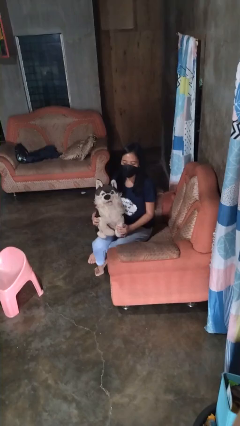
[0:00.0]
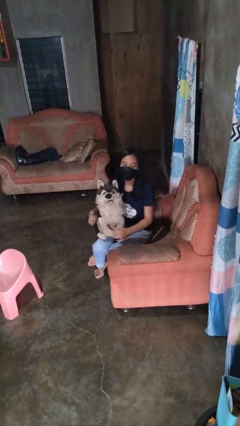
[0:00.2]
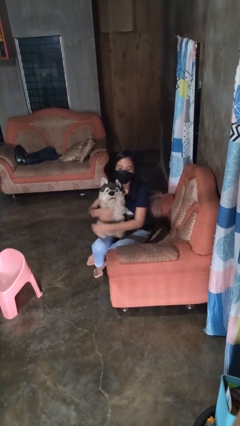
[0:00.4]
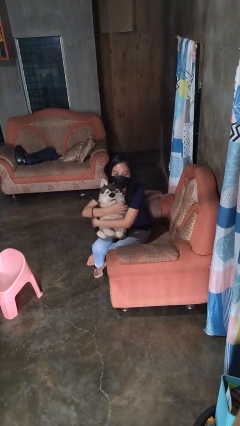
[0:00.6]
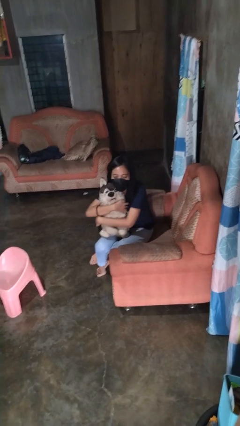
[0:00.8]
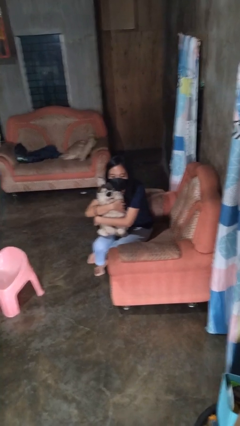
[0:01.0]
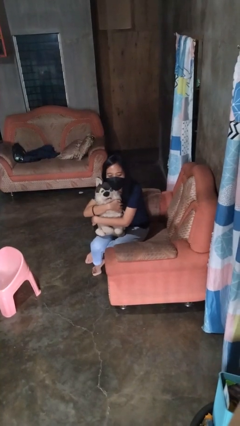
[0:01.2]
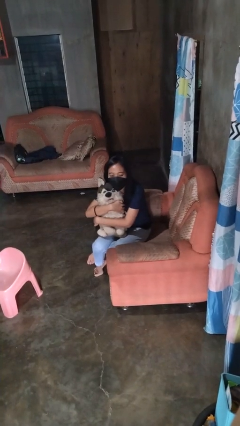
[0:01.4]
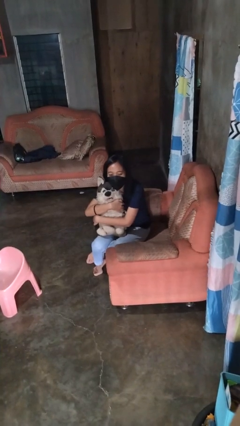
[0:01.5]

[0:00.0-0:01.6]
person hugs stuffed animal

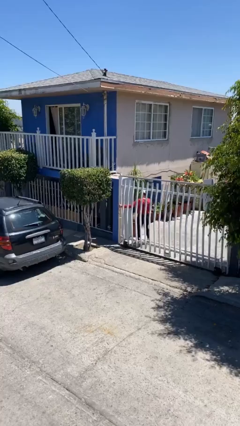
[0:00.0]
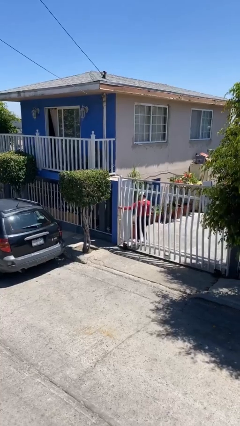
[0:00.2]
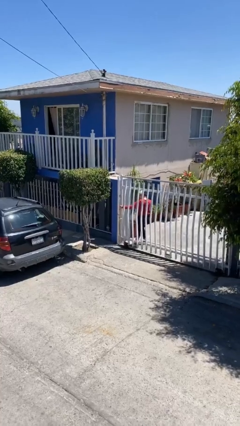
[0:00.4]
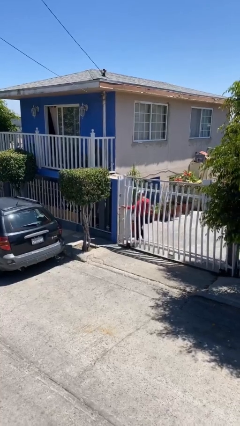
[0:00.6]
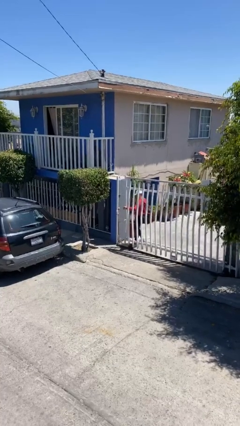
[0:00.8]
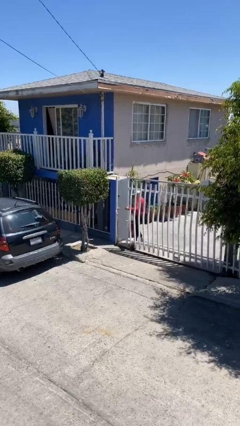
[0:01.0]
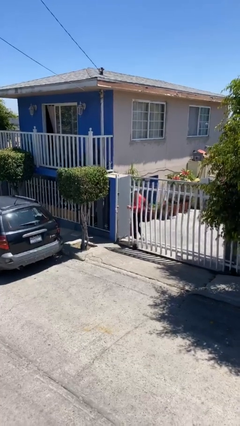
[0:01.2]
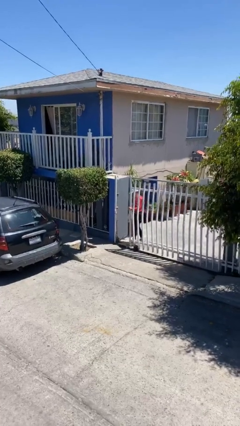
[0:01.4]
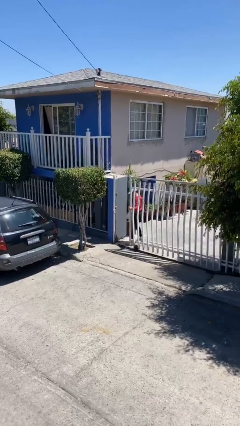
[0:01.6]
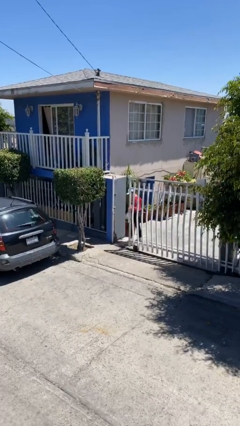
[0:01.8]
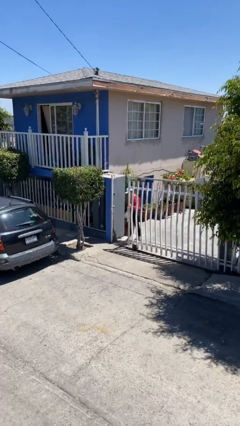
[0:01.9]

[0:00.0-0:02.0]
person opens facility door

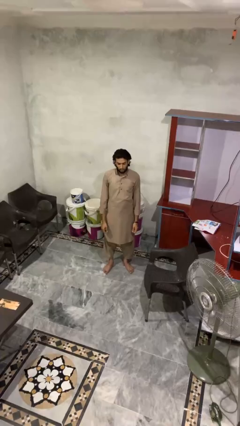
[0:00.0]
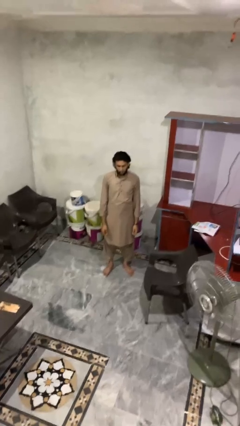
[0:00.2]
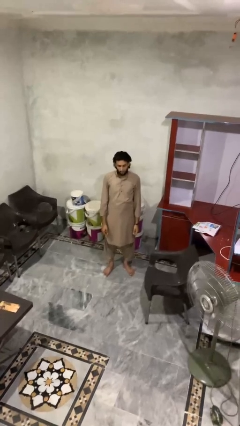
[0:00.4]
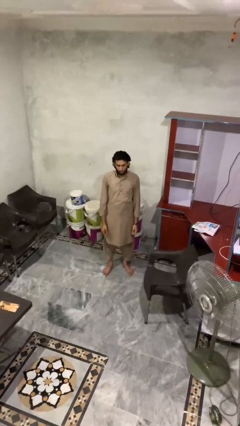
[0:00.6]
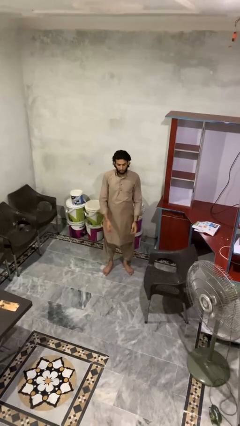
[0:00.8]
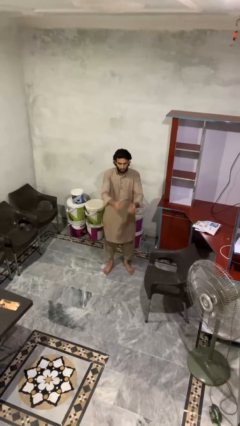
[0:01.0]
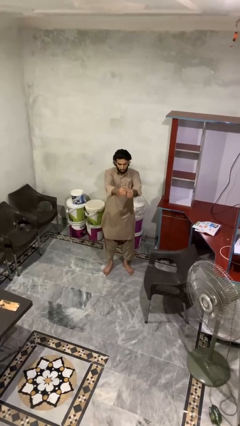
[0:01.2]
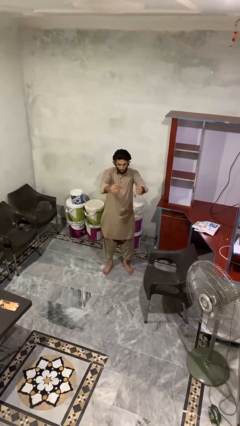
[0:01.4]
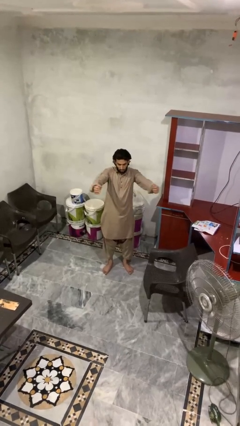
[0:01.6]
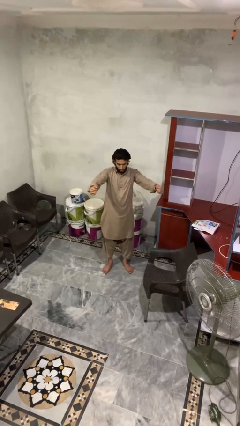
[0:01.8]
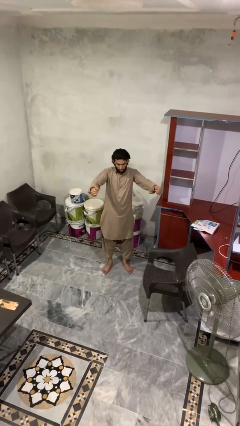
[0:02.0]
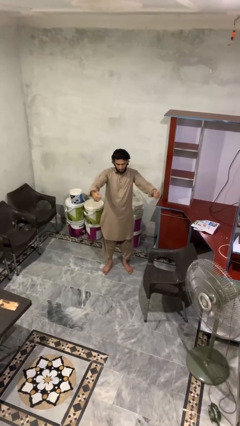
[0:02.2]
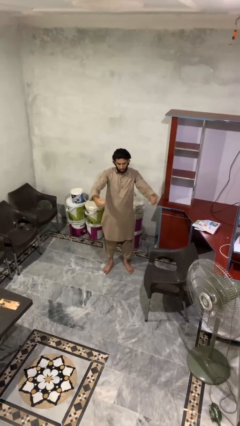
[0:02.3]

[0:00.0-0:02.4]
person gestures zoom in

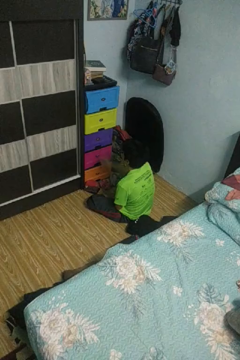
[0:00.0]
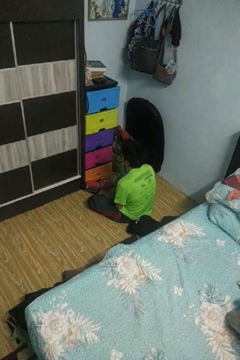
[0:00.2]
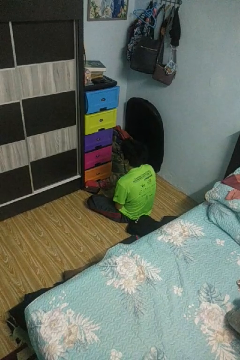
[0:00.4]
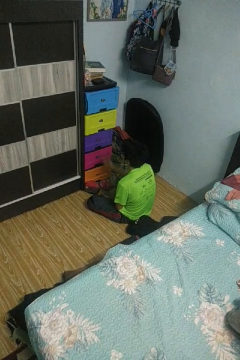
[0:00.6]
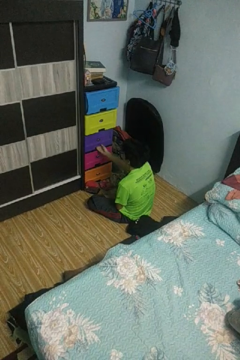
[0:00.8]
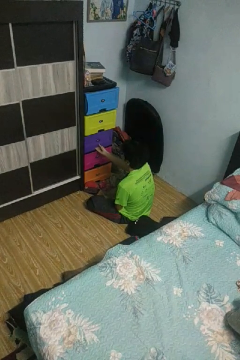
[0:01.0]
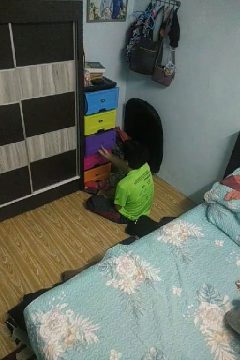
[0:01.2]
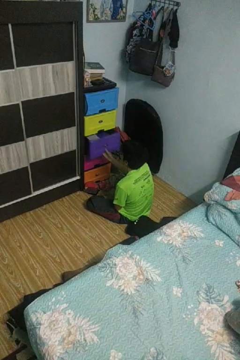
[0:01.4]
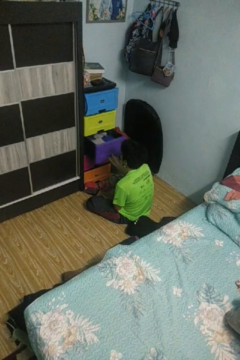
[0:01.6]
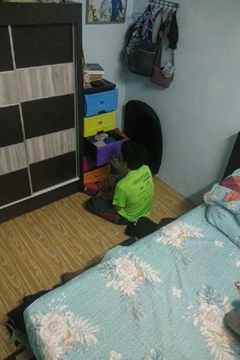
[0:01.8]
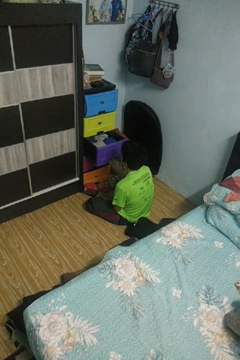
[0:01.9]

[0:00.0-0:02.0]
person opens dresser drawer

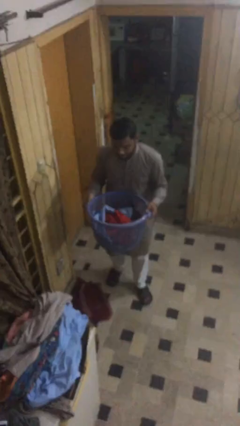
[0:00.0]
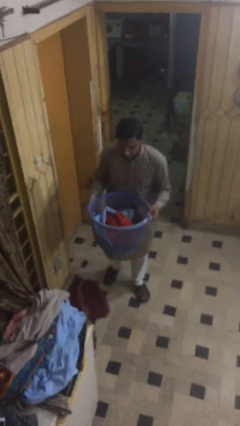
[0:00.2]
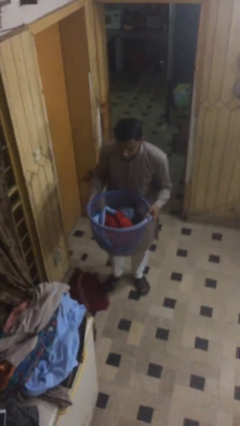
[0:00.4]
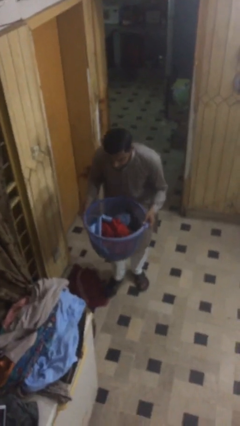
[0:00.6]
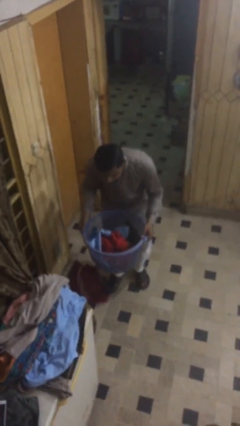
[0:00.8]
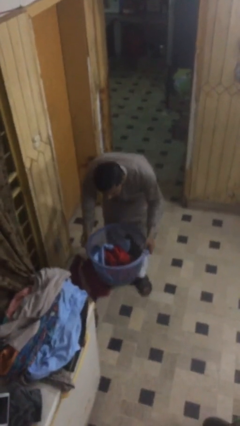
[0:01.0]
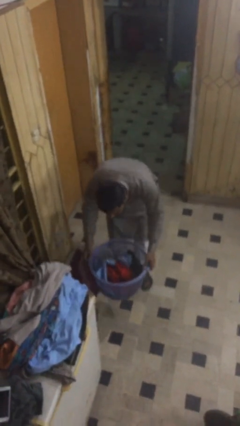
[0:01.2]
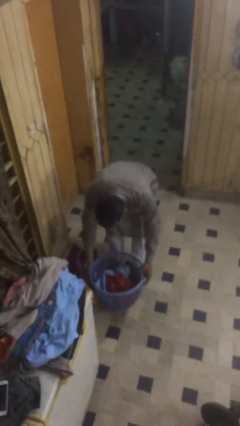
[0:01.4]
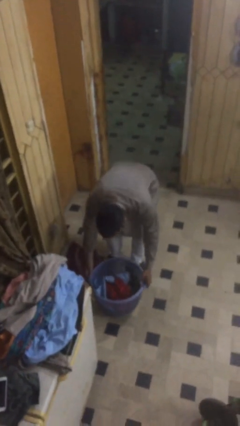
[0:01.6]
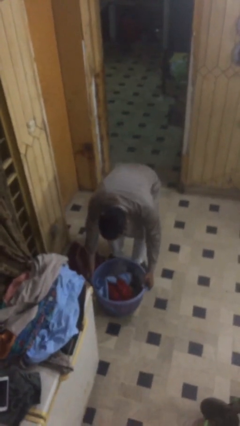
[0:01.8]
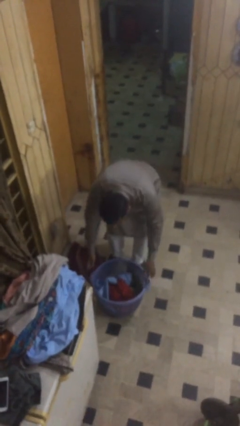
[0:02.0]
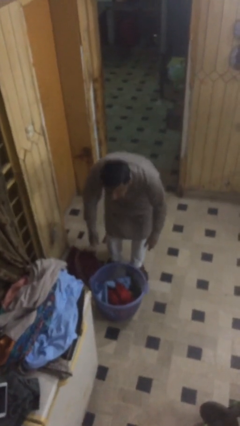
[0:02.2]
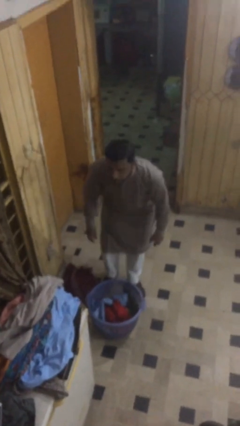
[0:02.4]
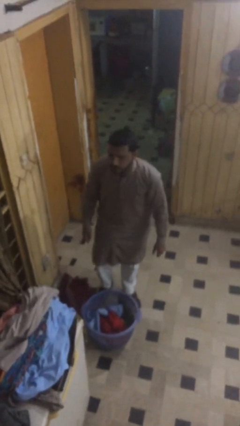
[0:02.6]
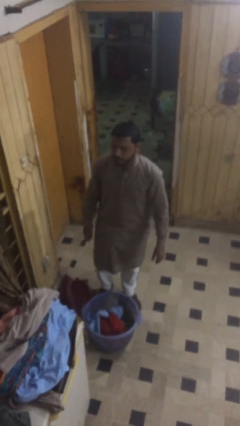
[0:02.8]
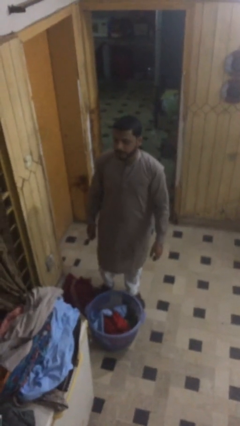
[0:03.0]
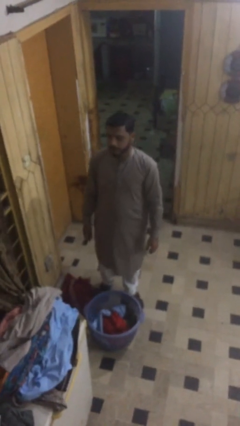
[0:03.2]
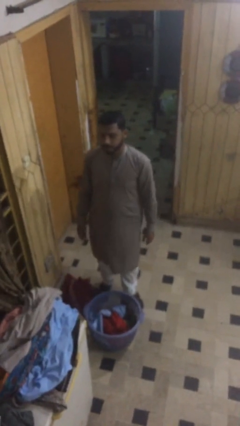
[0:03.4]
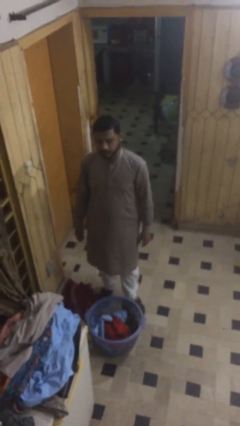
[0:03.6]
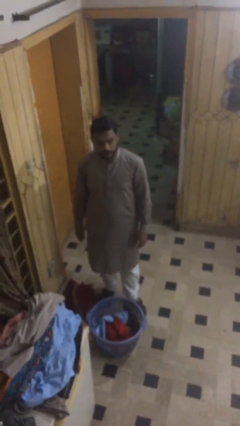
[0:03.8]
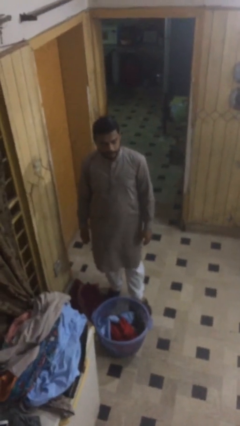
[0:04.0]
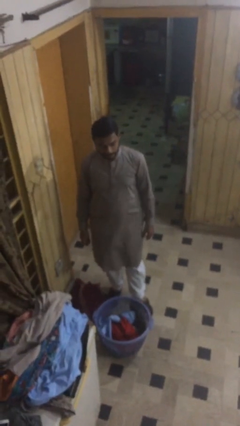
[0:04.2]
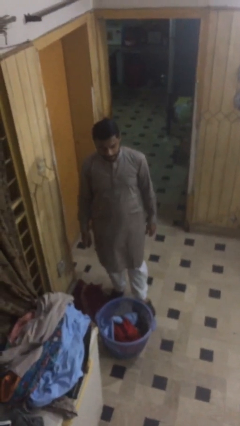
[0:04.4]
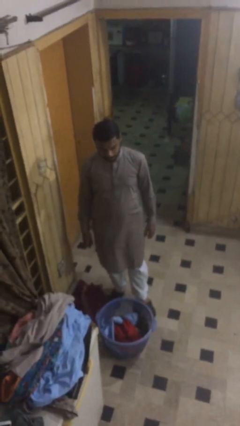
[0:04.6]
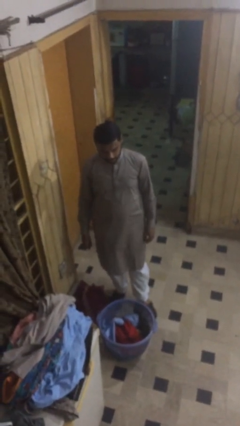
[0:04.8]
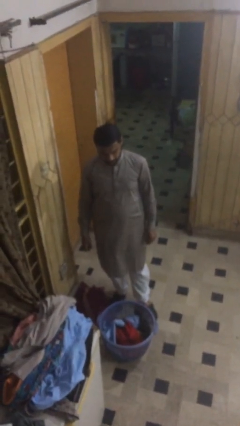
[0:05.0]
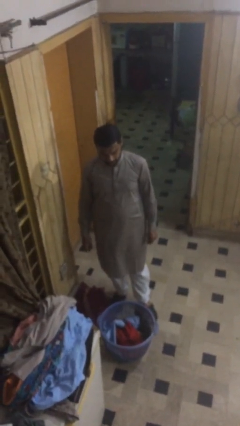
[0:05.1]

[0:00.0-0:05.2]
person puts down object on floor

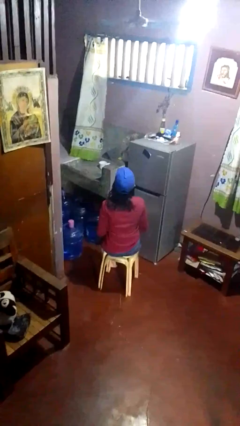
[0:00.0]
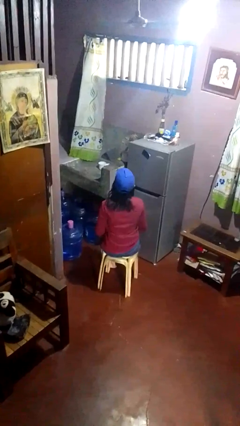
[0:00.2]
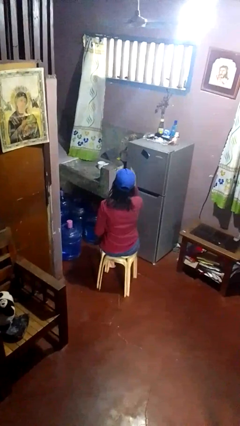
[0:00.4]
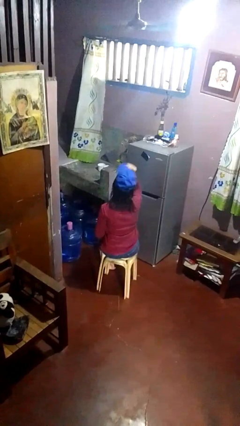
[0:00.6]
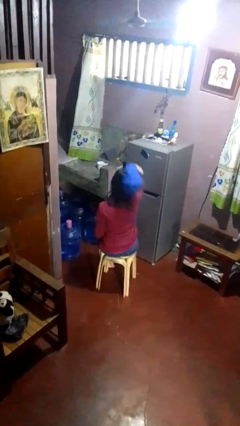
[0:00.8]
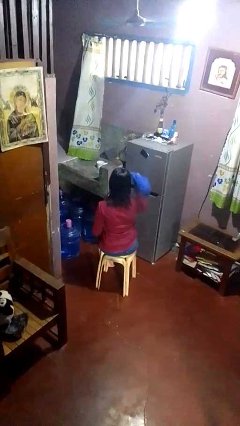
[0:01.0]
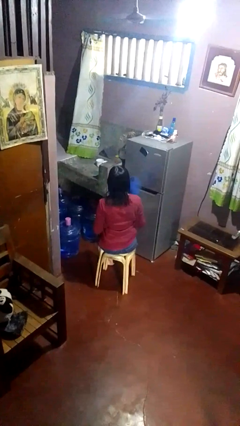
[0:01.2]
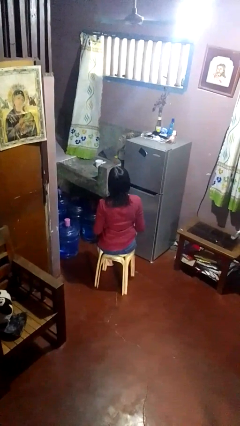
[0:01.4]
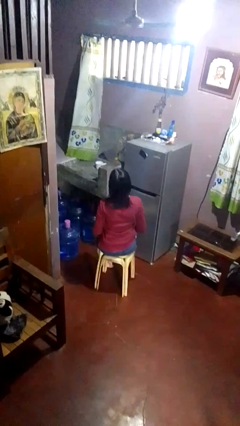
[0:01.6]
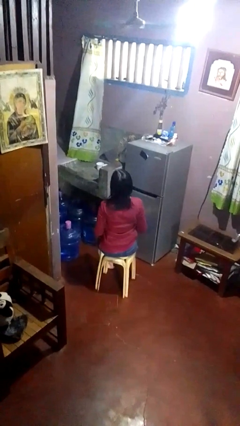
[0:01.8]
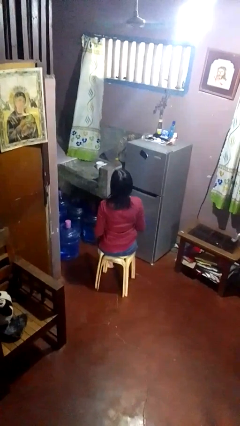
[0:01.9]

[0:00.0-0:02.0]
person takes off hat

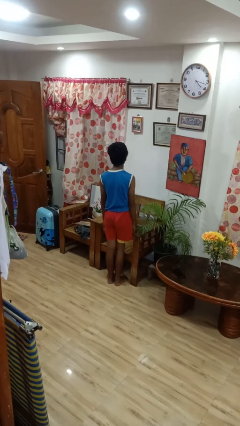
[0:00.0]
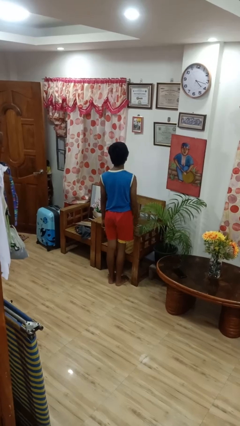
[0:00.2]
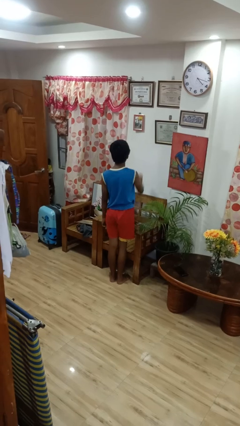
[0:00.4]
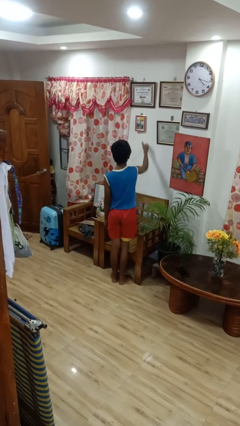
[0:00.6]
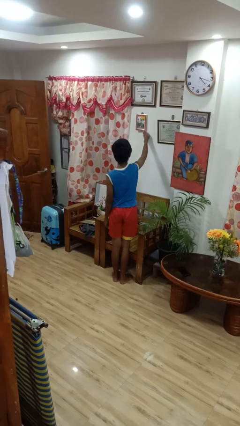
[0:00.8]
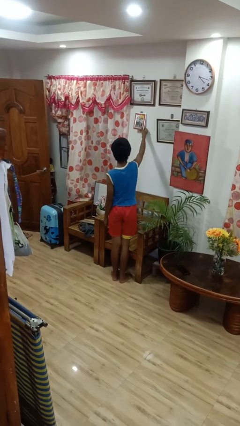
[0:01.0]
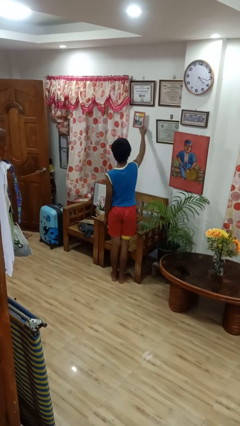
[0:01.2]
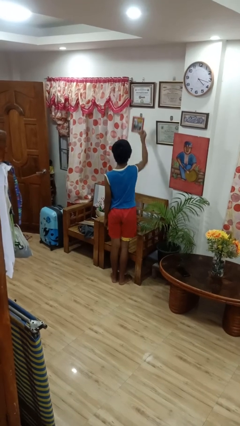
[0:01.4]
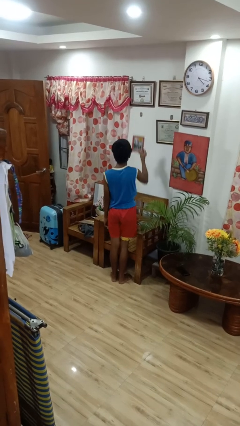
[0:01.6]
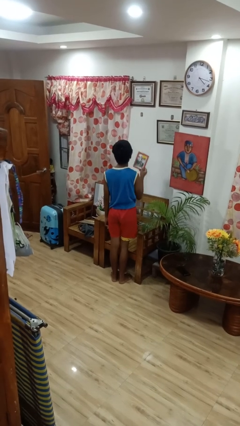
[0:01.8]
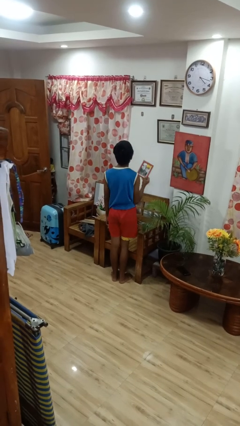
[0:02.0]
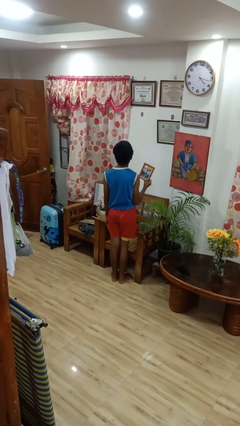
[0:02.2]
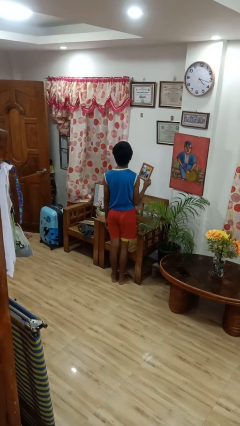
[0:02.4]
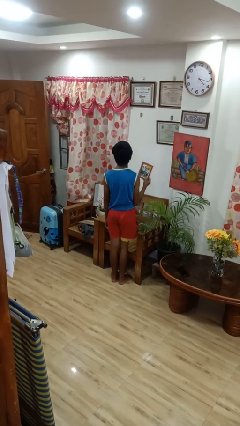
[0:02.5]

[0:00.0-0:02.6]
person takes down picture frame
